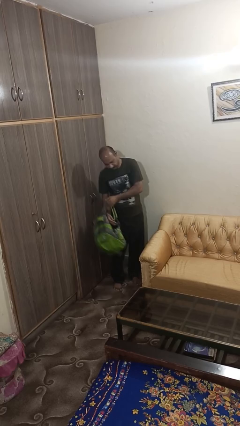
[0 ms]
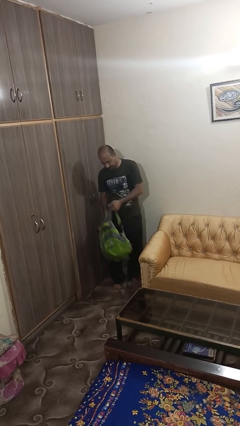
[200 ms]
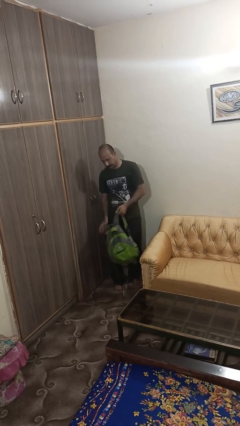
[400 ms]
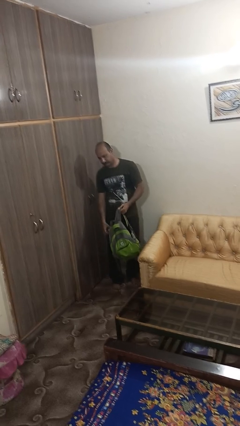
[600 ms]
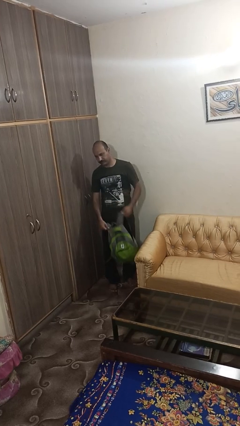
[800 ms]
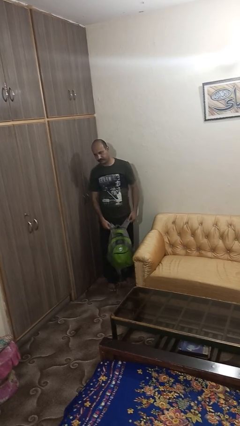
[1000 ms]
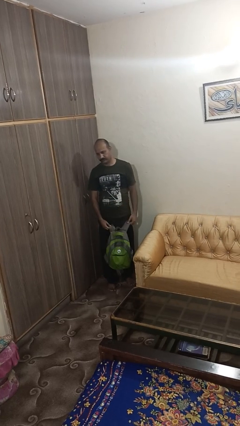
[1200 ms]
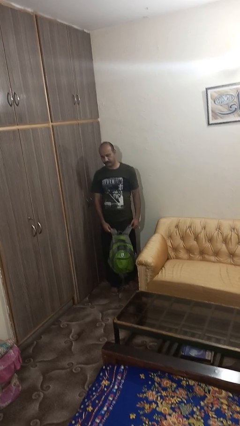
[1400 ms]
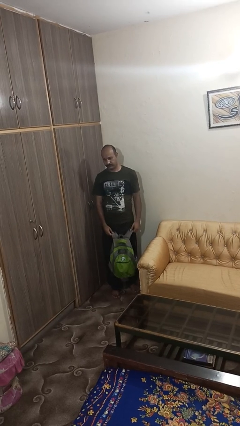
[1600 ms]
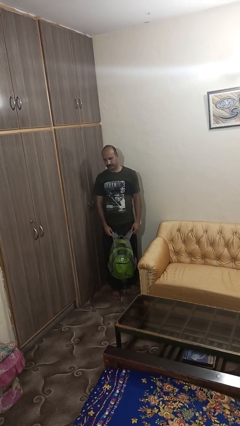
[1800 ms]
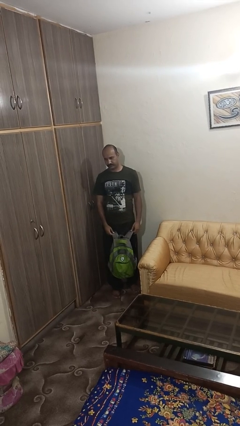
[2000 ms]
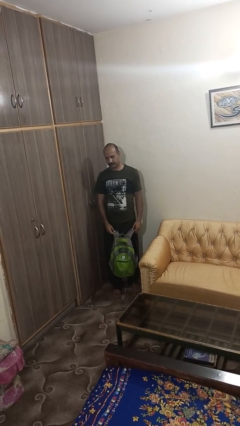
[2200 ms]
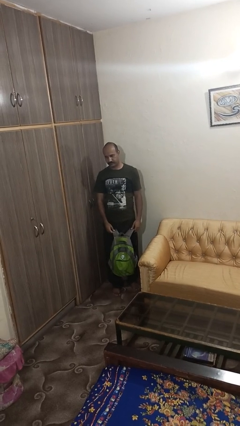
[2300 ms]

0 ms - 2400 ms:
person takes off backpack

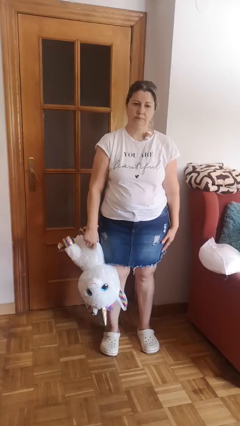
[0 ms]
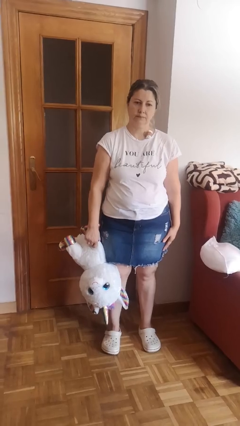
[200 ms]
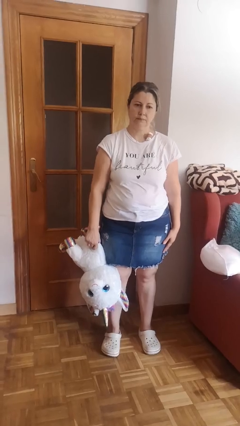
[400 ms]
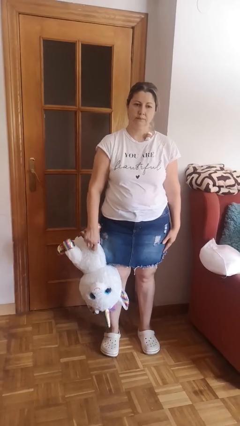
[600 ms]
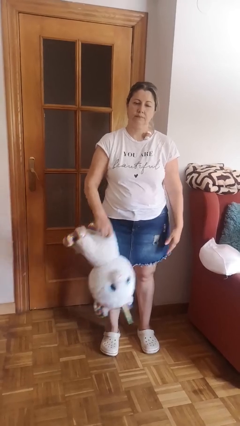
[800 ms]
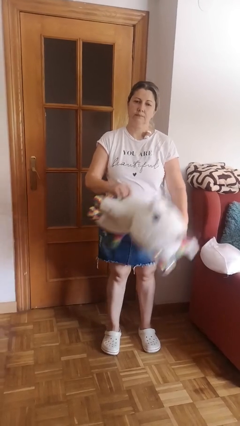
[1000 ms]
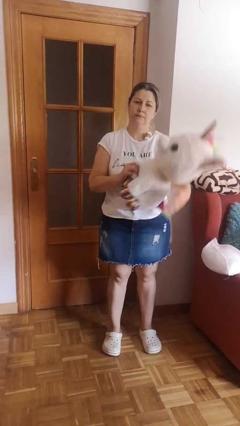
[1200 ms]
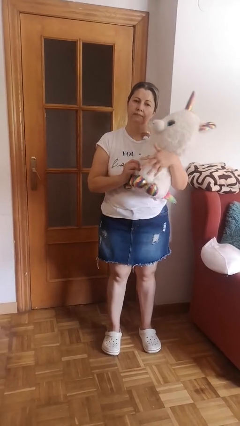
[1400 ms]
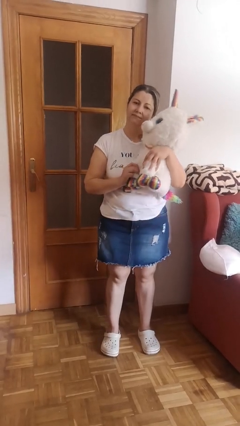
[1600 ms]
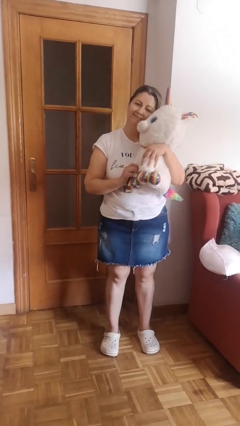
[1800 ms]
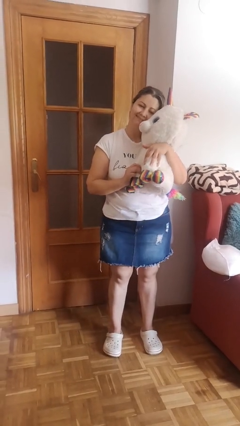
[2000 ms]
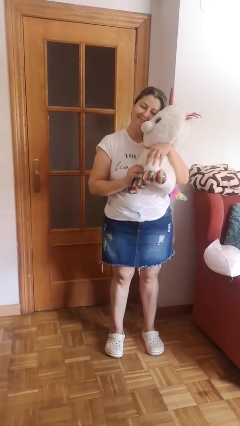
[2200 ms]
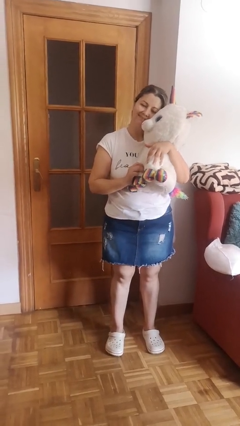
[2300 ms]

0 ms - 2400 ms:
person hugs stuffed animal

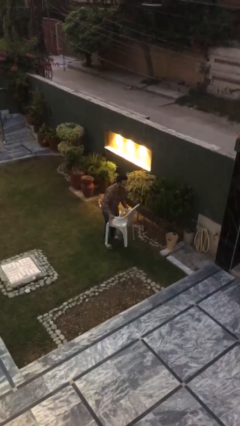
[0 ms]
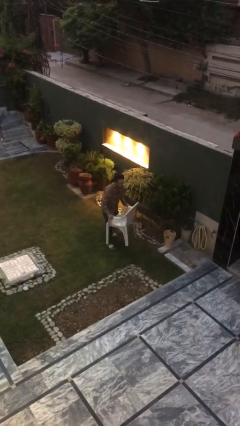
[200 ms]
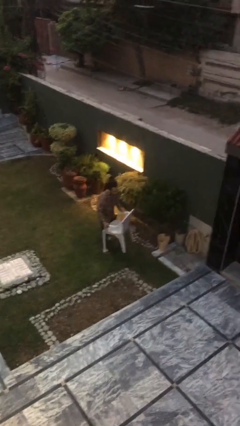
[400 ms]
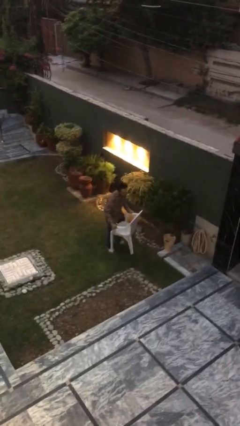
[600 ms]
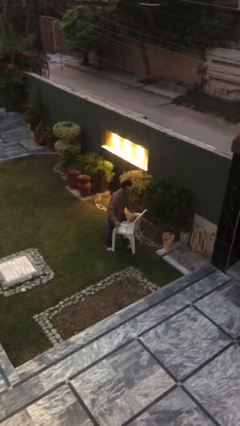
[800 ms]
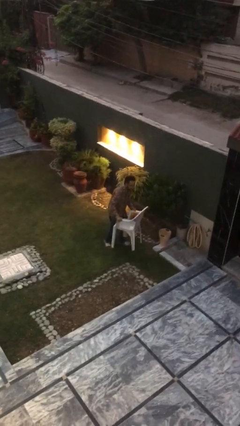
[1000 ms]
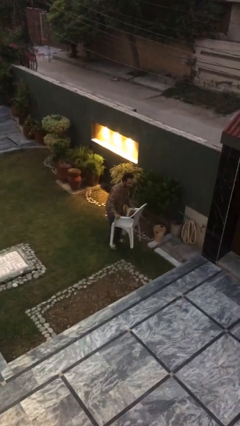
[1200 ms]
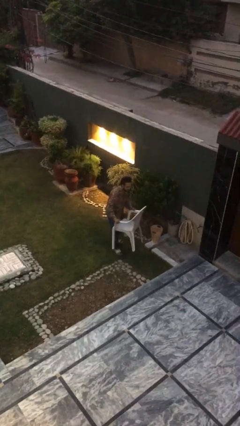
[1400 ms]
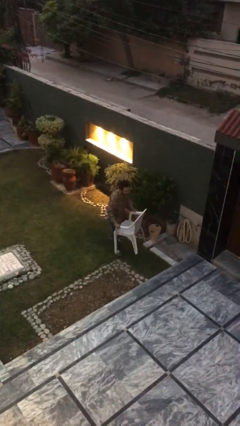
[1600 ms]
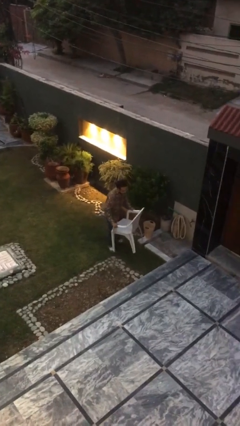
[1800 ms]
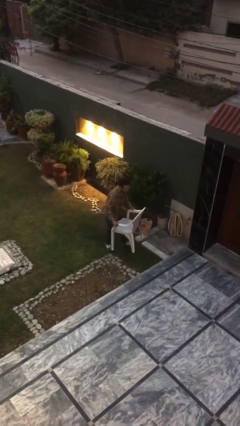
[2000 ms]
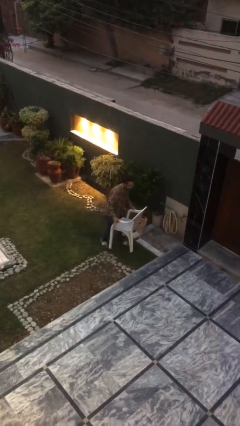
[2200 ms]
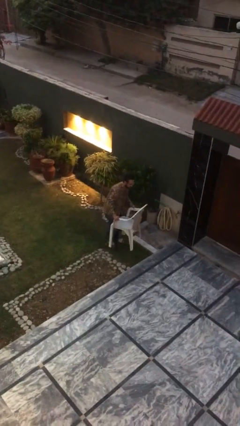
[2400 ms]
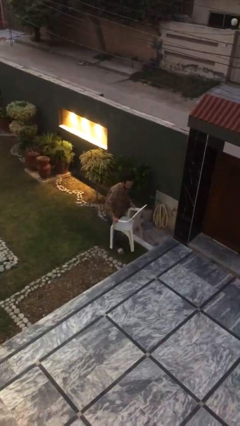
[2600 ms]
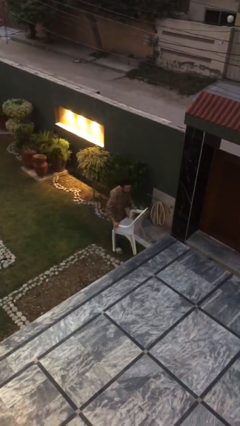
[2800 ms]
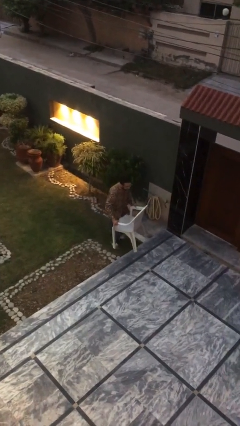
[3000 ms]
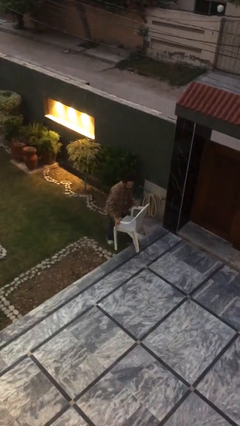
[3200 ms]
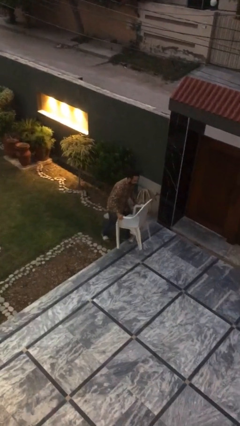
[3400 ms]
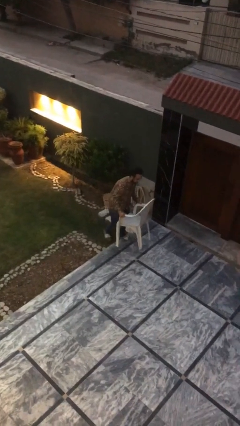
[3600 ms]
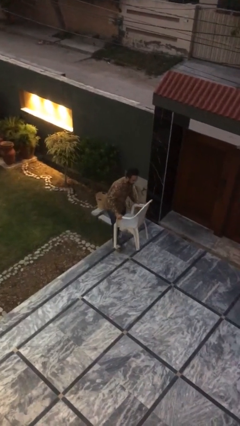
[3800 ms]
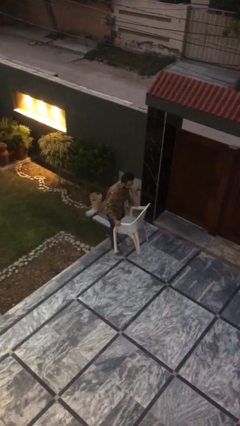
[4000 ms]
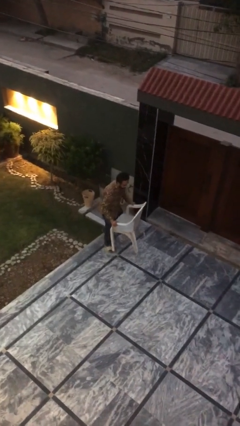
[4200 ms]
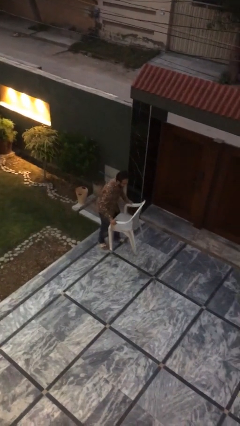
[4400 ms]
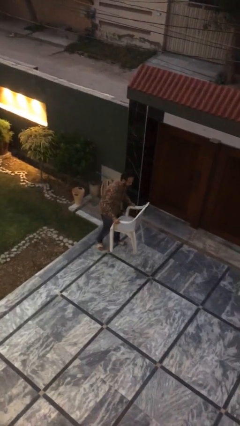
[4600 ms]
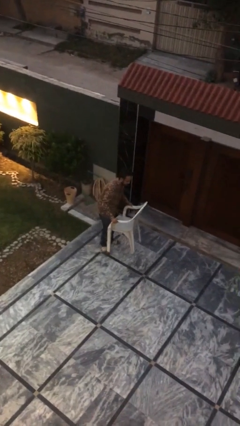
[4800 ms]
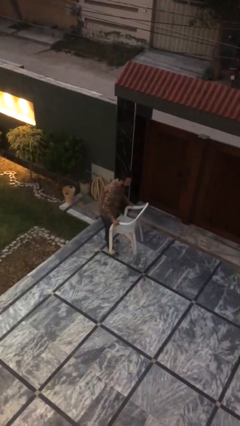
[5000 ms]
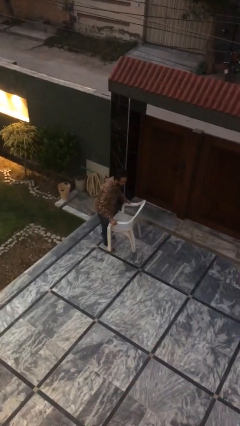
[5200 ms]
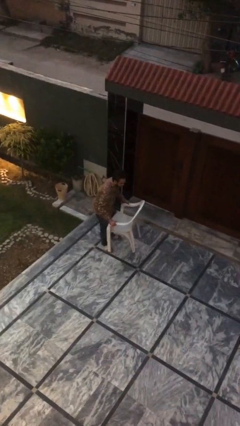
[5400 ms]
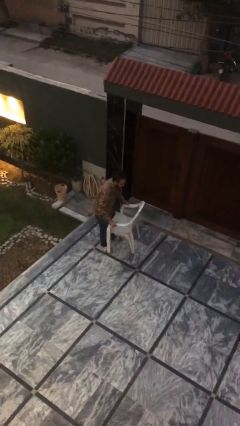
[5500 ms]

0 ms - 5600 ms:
person carries heavy object

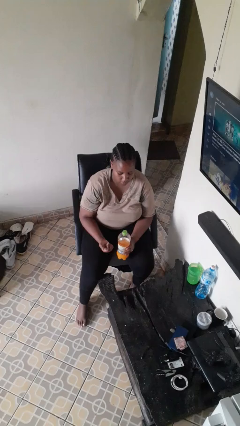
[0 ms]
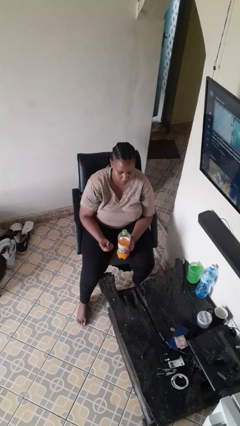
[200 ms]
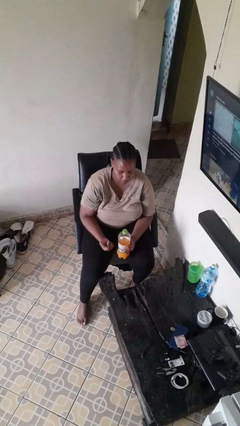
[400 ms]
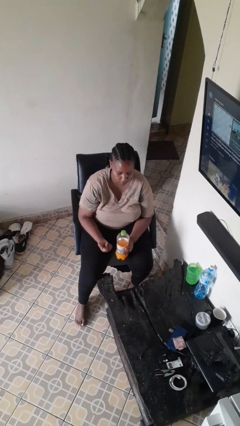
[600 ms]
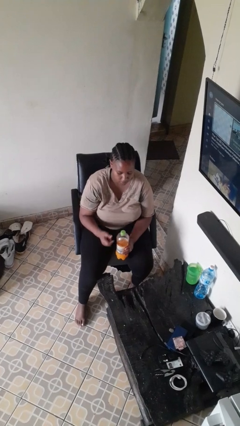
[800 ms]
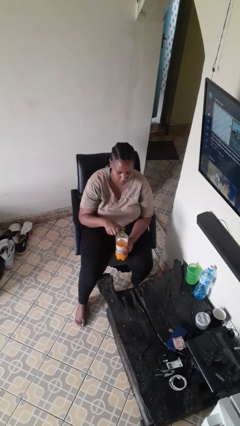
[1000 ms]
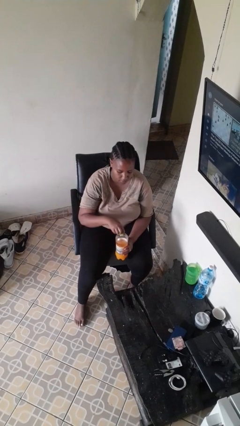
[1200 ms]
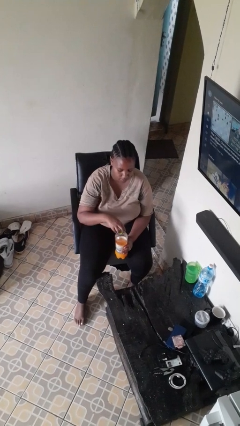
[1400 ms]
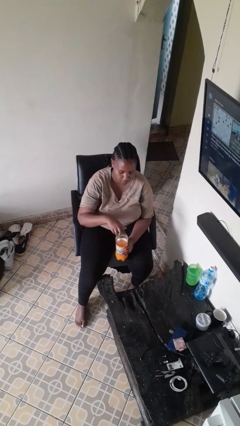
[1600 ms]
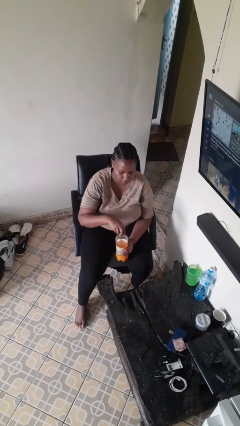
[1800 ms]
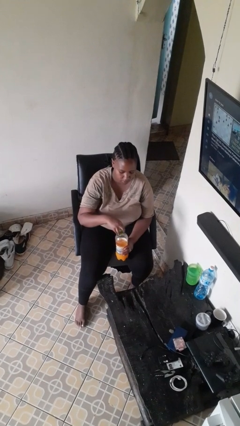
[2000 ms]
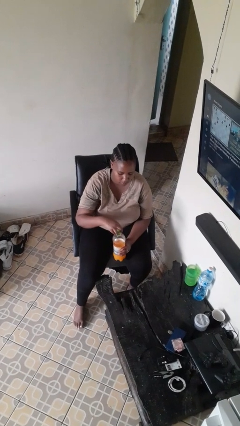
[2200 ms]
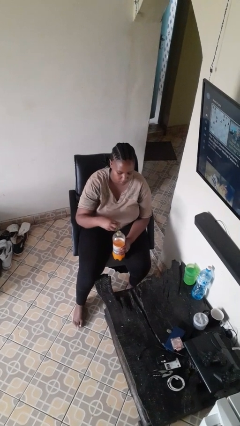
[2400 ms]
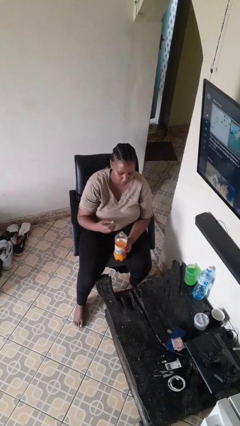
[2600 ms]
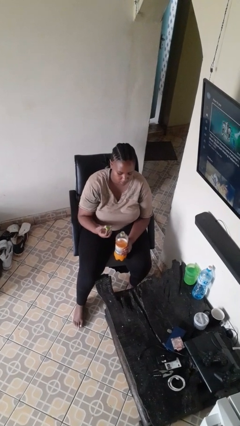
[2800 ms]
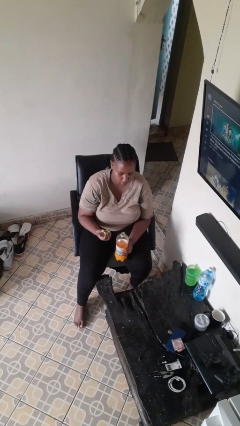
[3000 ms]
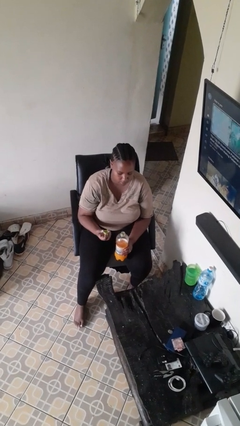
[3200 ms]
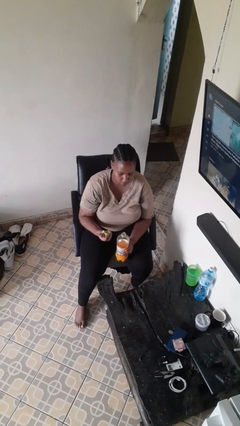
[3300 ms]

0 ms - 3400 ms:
person unscrews lid from bottle

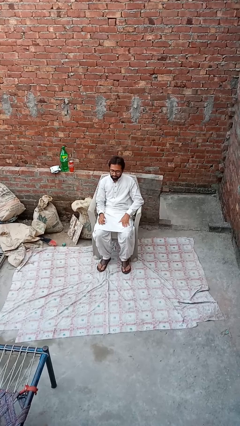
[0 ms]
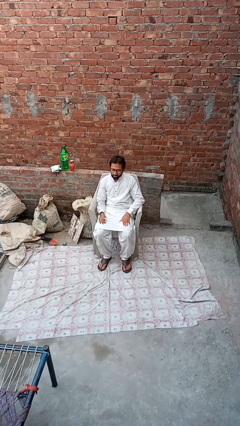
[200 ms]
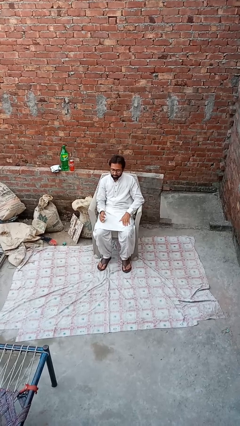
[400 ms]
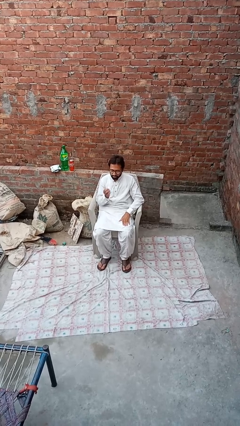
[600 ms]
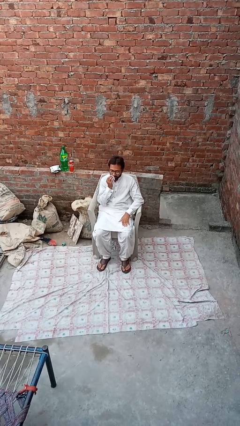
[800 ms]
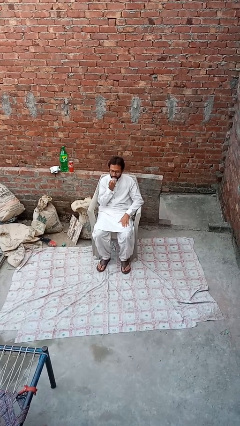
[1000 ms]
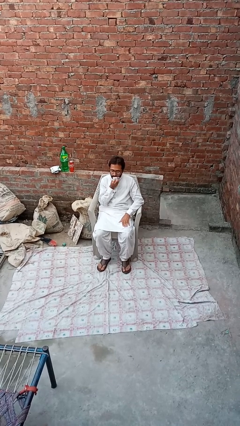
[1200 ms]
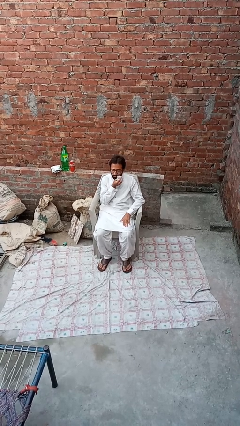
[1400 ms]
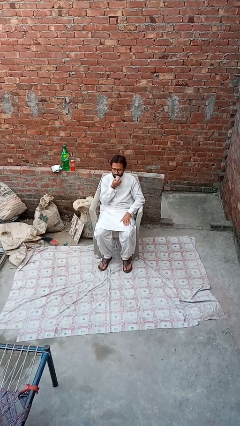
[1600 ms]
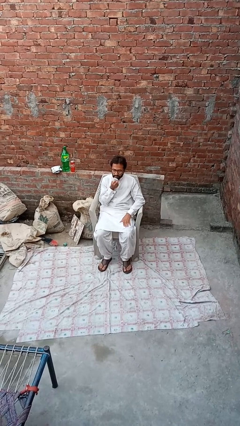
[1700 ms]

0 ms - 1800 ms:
person wipes mouth with napkin

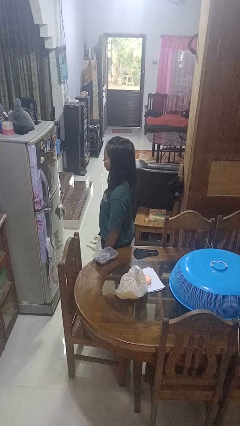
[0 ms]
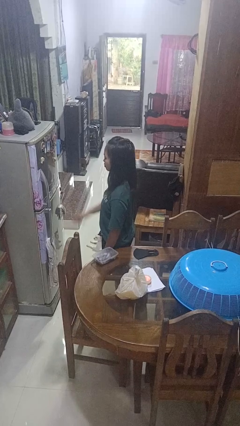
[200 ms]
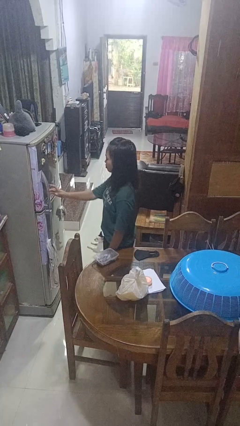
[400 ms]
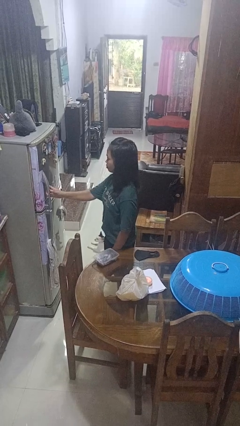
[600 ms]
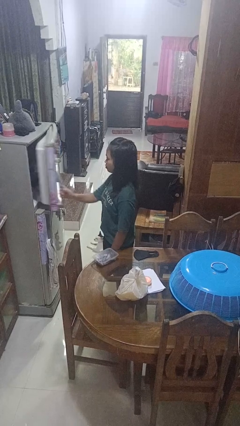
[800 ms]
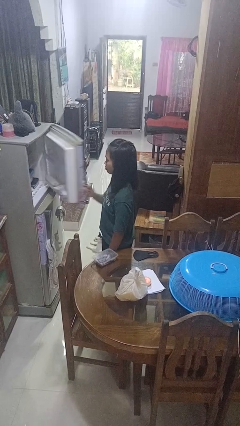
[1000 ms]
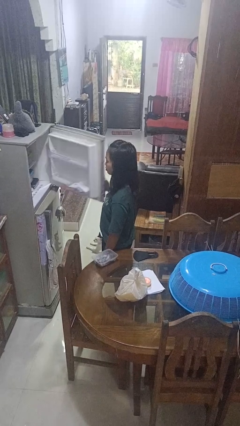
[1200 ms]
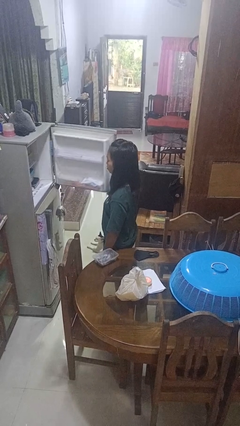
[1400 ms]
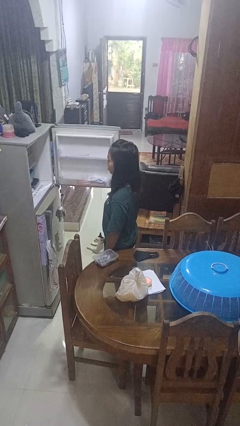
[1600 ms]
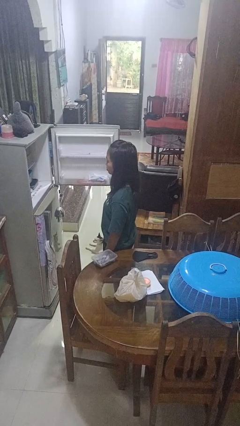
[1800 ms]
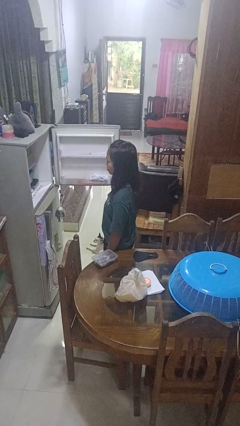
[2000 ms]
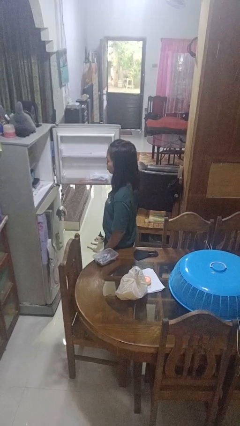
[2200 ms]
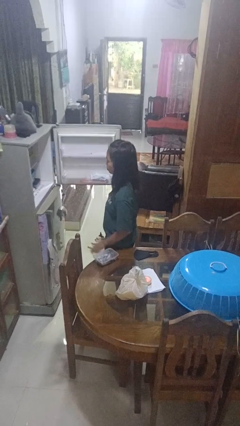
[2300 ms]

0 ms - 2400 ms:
person opens refrigerator
